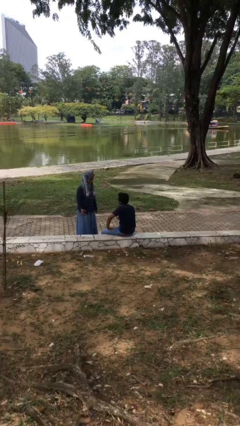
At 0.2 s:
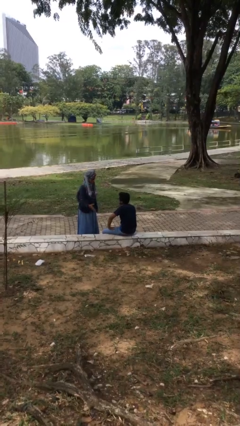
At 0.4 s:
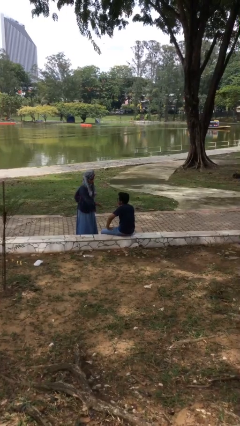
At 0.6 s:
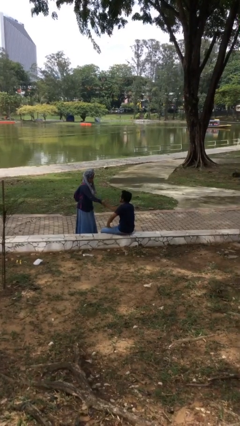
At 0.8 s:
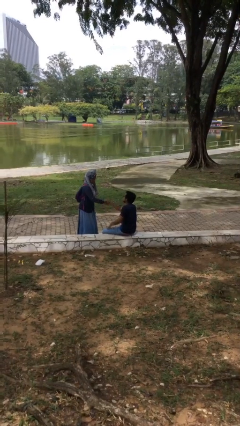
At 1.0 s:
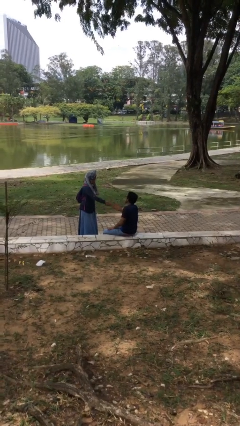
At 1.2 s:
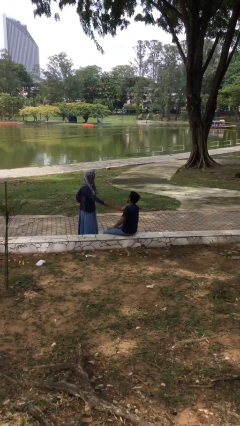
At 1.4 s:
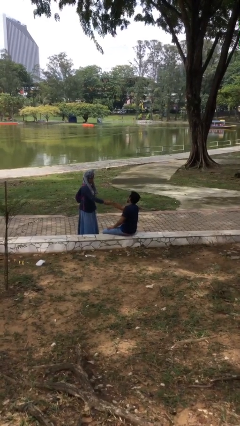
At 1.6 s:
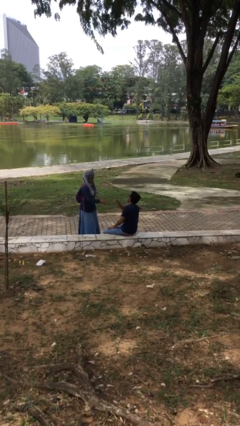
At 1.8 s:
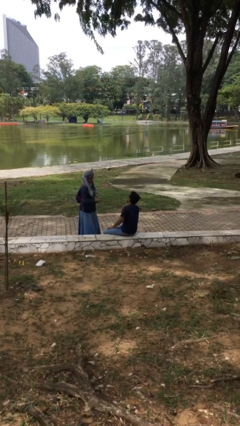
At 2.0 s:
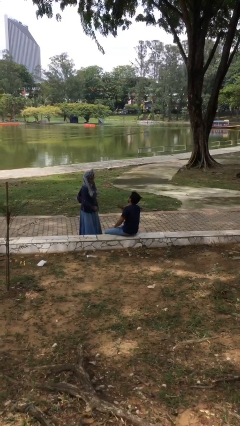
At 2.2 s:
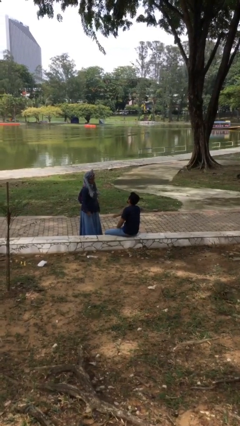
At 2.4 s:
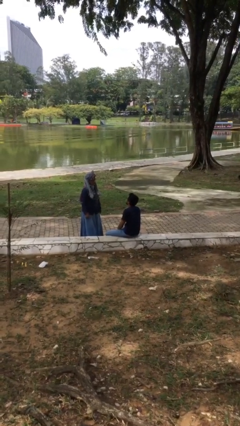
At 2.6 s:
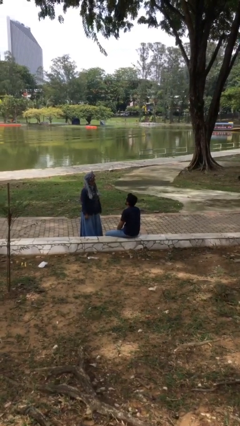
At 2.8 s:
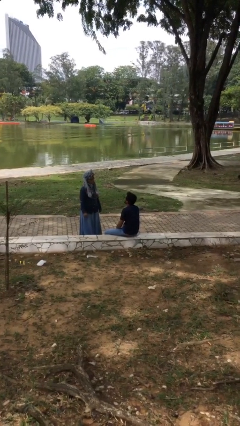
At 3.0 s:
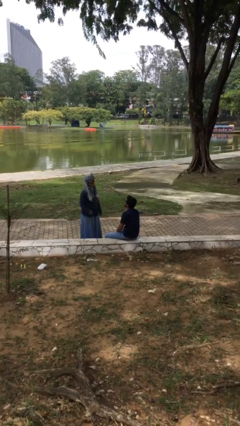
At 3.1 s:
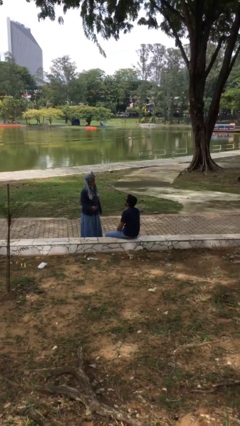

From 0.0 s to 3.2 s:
person shakes hand

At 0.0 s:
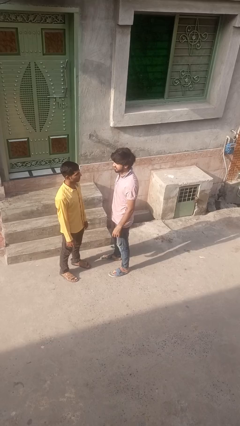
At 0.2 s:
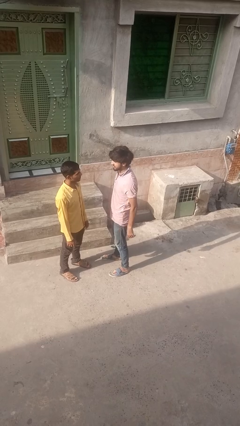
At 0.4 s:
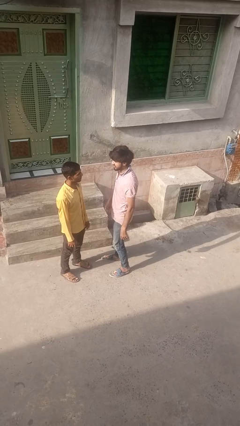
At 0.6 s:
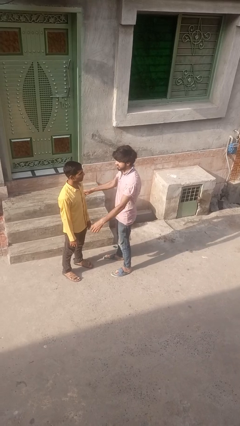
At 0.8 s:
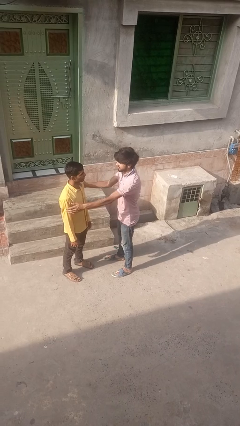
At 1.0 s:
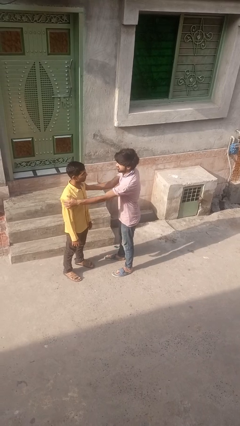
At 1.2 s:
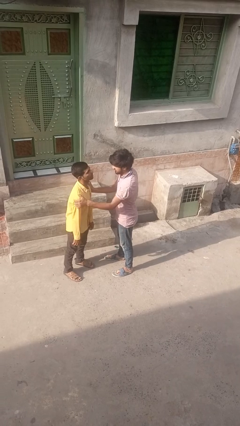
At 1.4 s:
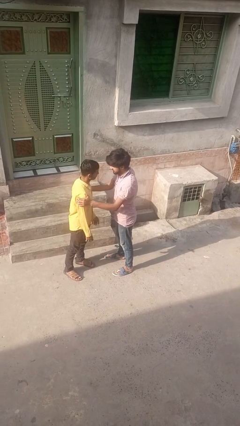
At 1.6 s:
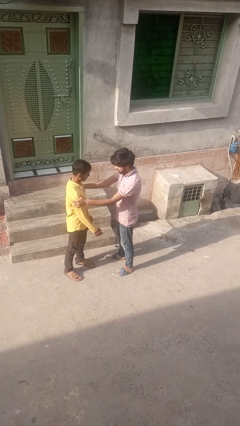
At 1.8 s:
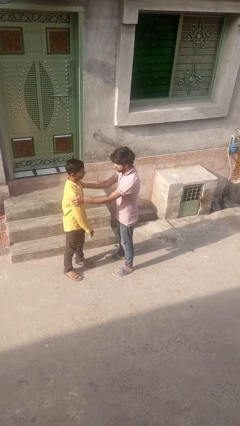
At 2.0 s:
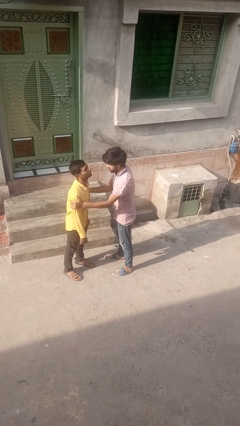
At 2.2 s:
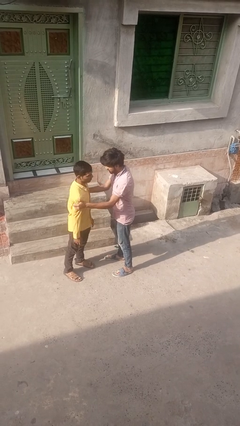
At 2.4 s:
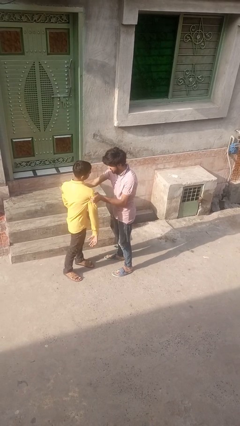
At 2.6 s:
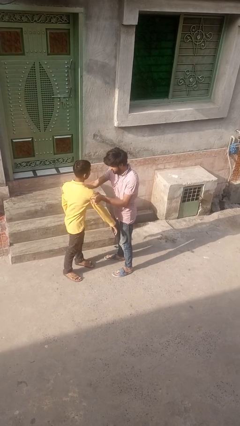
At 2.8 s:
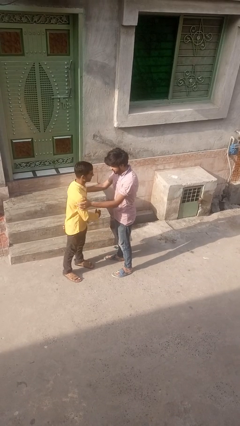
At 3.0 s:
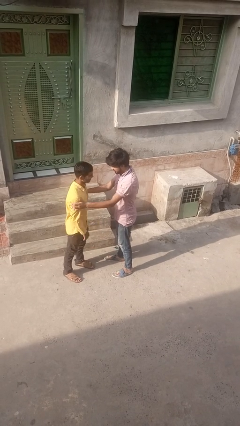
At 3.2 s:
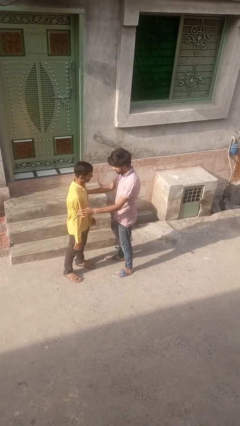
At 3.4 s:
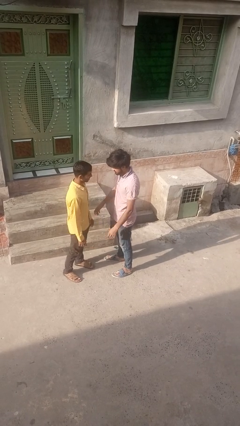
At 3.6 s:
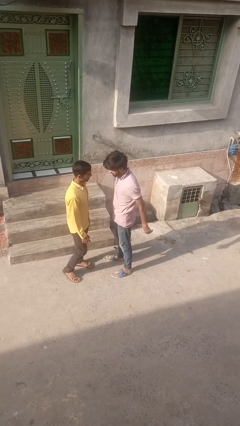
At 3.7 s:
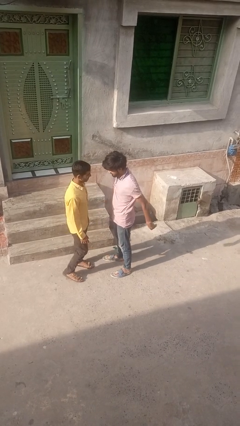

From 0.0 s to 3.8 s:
person grabs person by bicep

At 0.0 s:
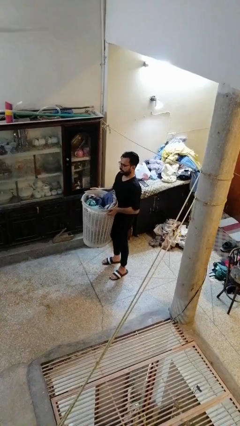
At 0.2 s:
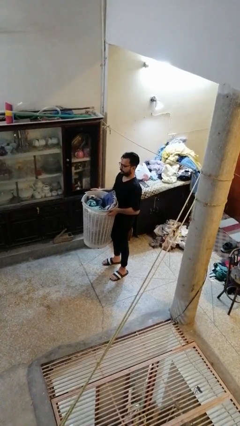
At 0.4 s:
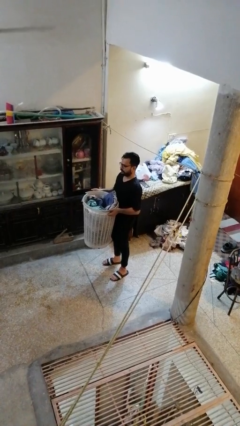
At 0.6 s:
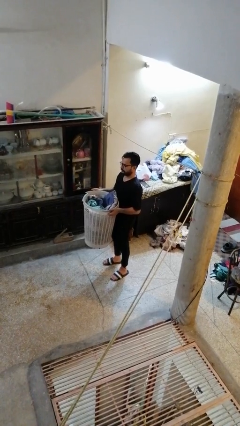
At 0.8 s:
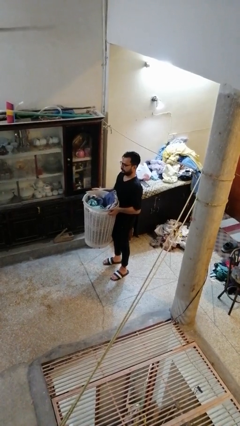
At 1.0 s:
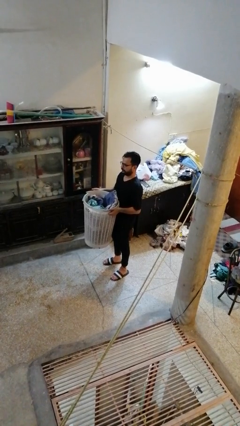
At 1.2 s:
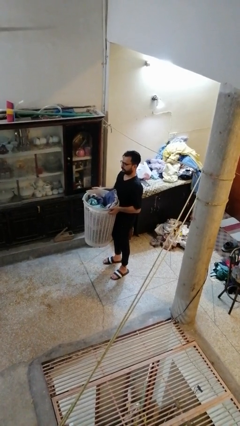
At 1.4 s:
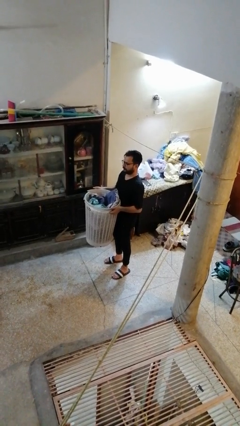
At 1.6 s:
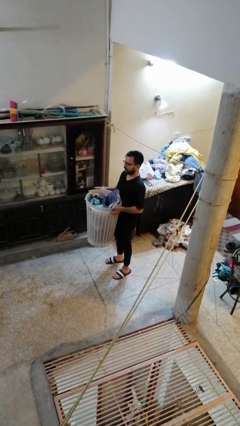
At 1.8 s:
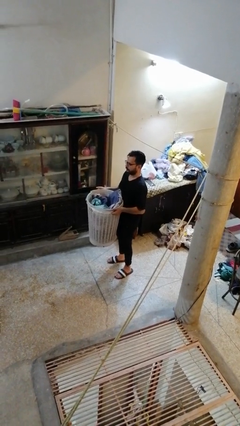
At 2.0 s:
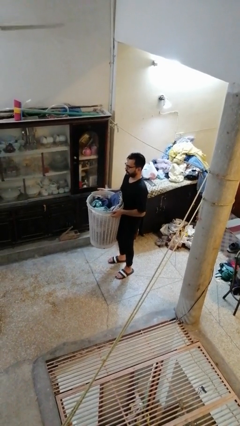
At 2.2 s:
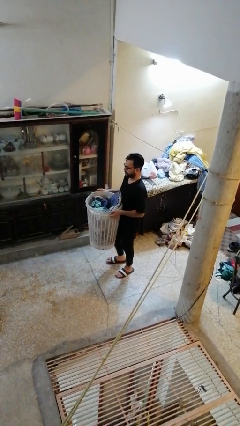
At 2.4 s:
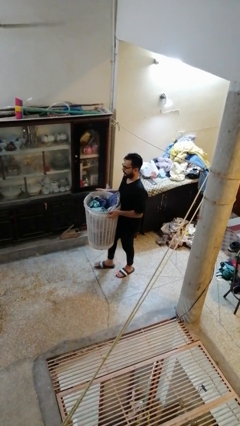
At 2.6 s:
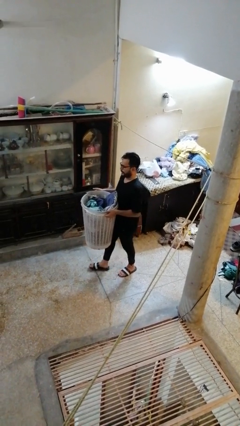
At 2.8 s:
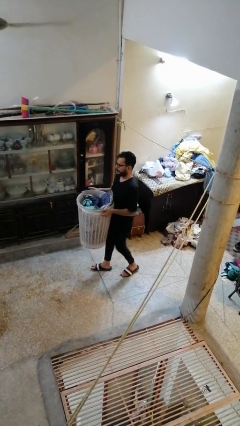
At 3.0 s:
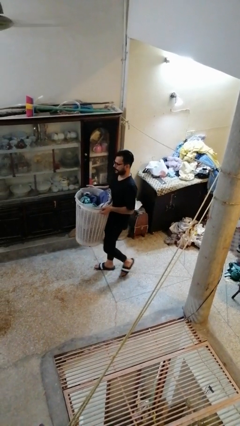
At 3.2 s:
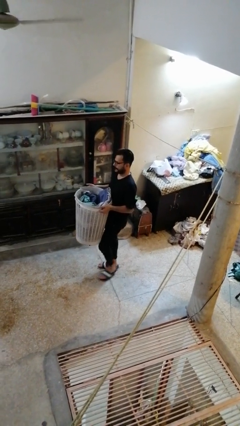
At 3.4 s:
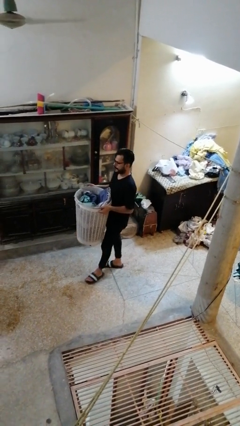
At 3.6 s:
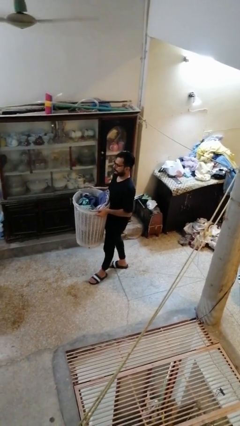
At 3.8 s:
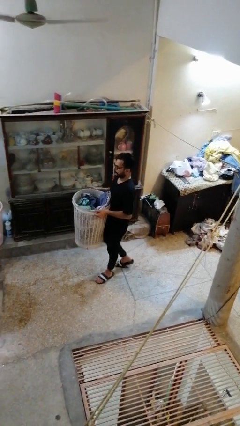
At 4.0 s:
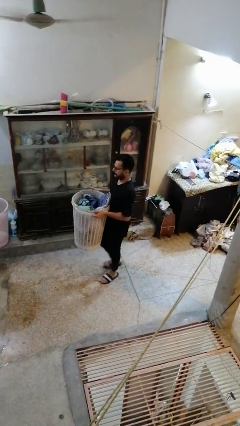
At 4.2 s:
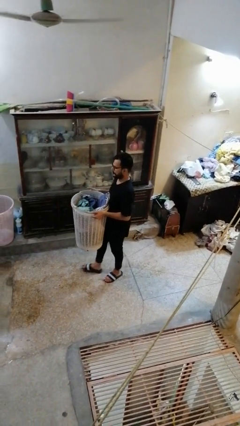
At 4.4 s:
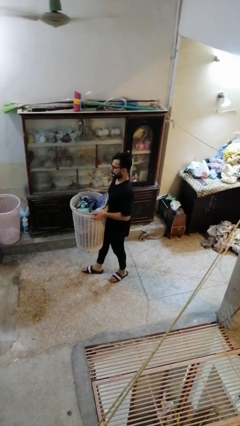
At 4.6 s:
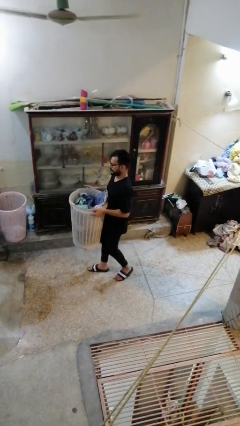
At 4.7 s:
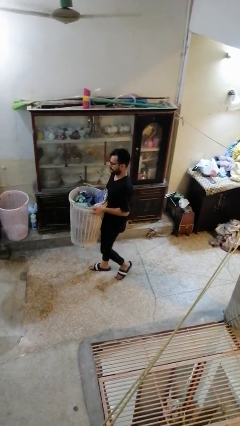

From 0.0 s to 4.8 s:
person carries laundry basket

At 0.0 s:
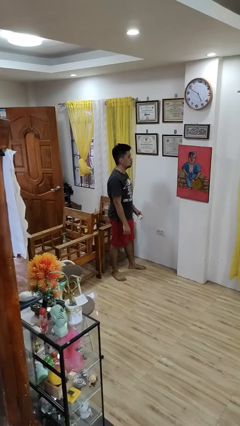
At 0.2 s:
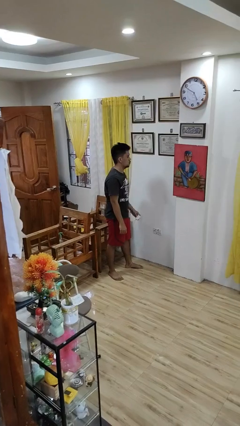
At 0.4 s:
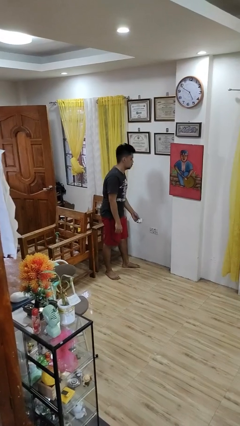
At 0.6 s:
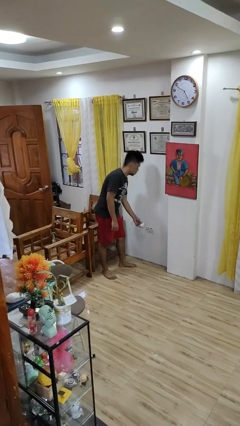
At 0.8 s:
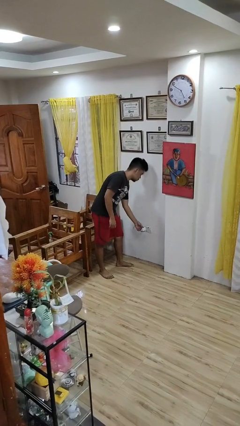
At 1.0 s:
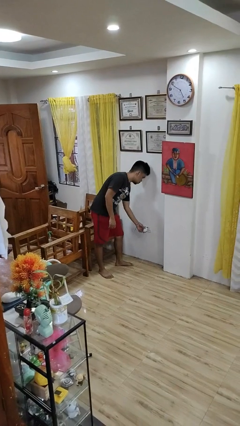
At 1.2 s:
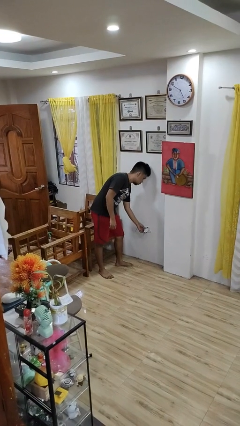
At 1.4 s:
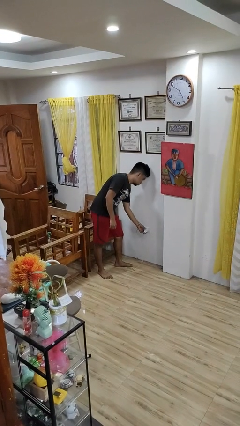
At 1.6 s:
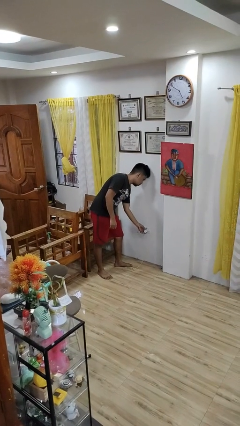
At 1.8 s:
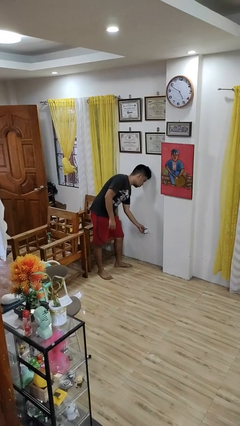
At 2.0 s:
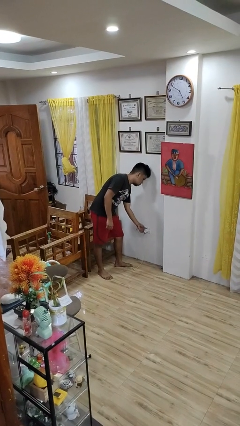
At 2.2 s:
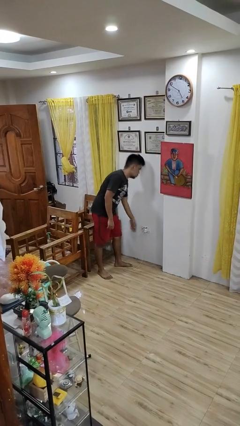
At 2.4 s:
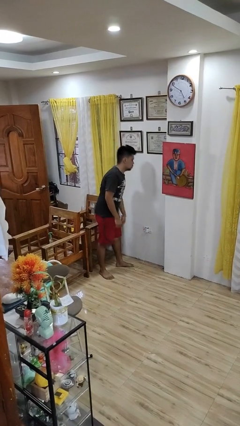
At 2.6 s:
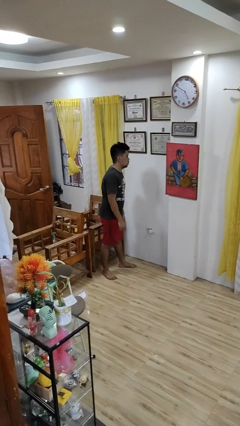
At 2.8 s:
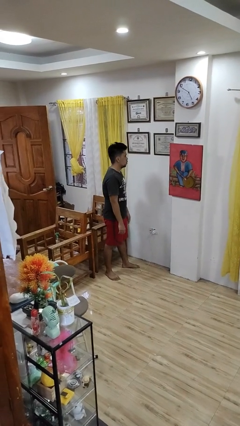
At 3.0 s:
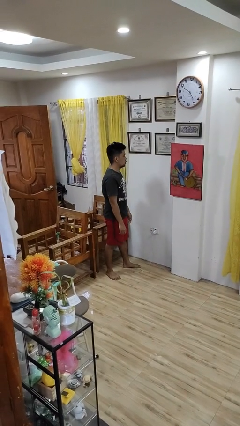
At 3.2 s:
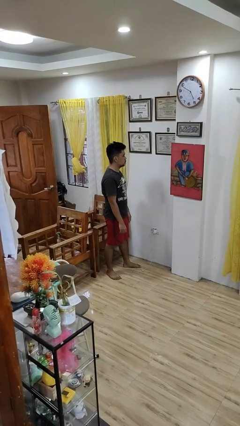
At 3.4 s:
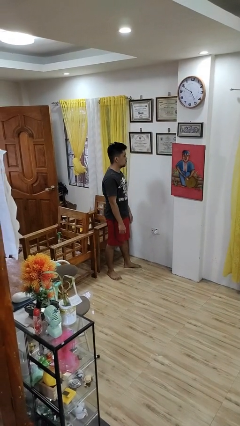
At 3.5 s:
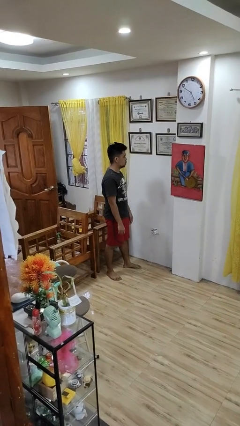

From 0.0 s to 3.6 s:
person plugs into electrical socket

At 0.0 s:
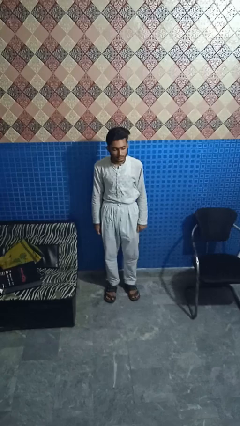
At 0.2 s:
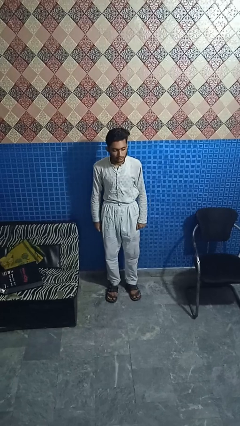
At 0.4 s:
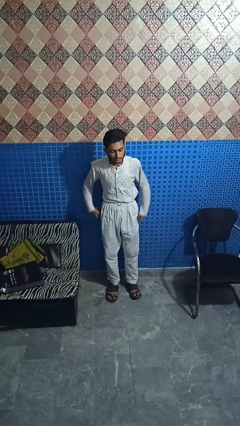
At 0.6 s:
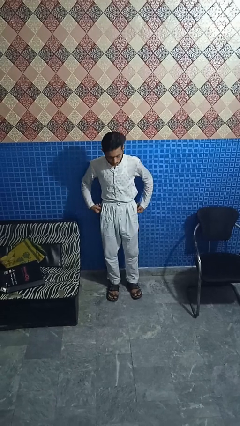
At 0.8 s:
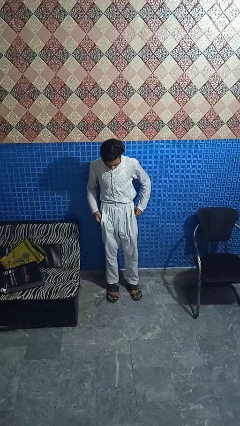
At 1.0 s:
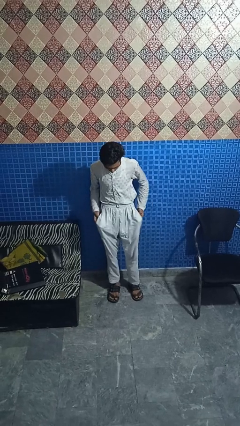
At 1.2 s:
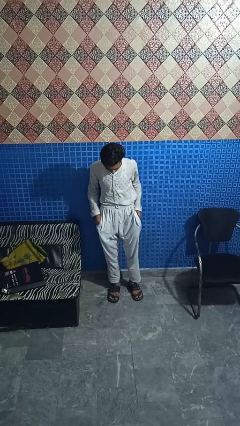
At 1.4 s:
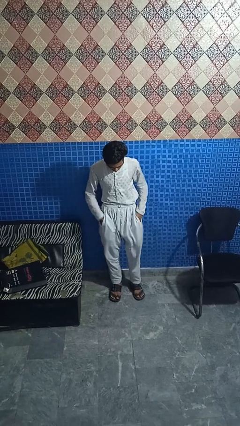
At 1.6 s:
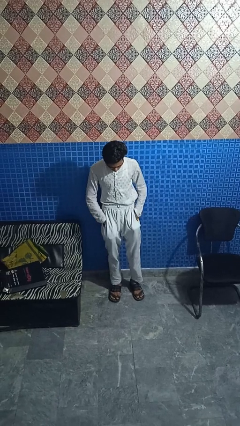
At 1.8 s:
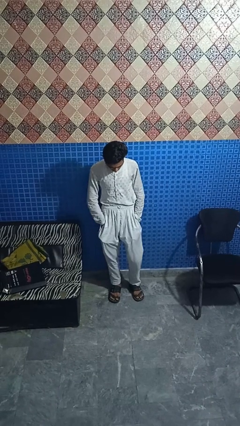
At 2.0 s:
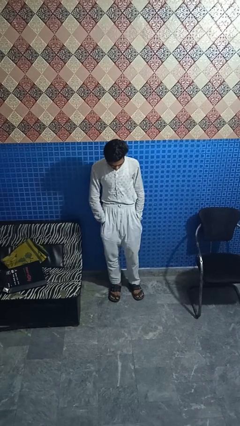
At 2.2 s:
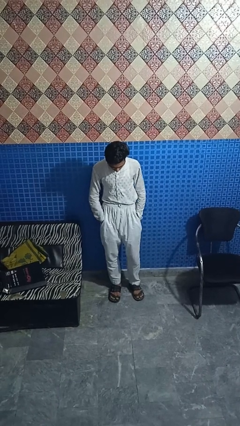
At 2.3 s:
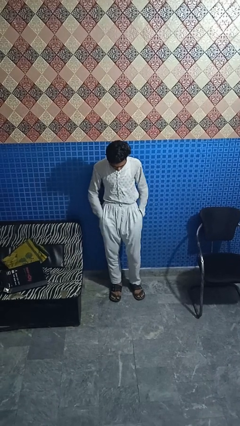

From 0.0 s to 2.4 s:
person puts hands in back pockets
